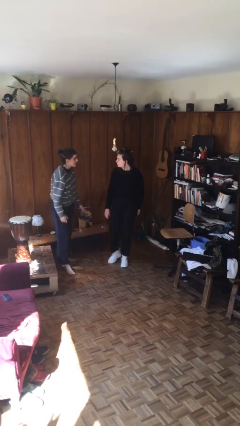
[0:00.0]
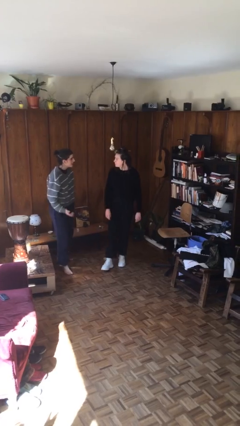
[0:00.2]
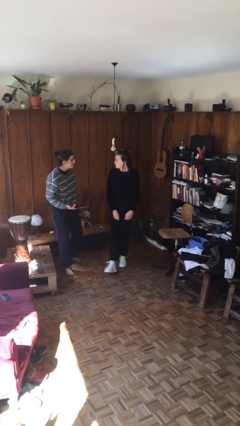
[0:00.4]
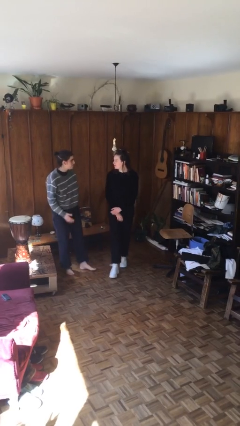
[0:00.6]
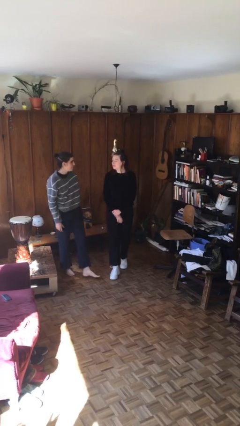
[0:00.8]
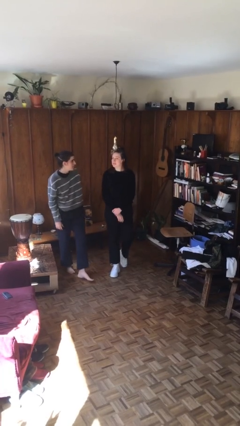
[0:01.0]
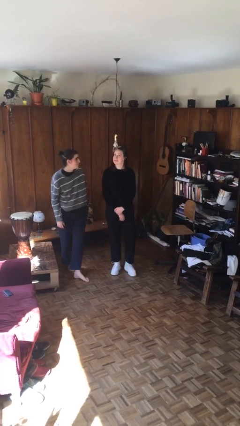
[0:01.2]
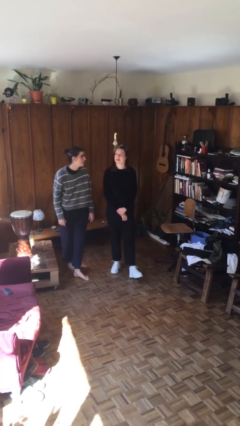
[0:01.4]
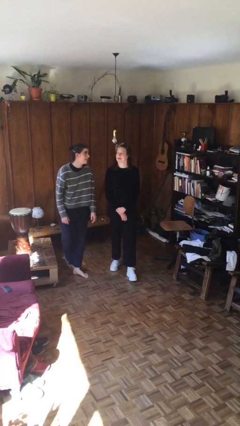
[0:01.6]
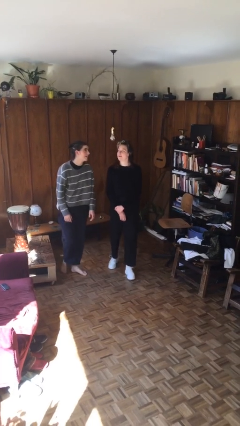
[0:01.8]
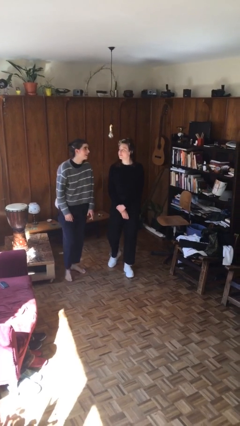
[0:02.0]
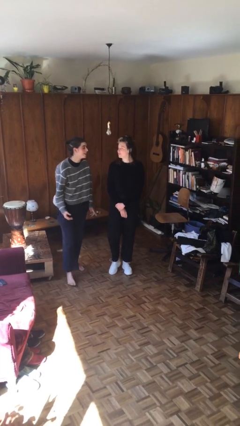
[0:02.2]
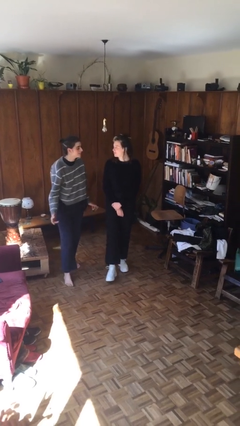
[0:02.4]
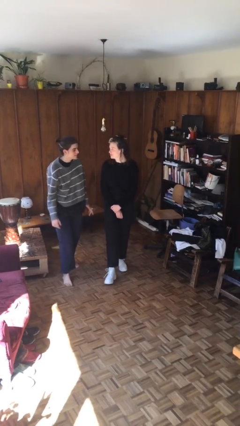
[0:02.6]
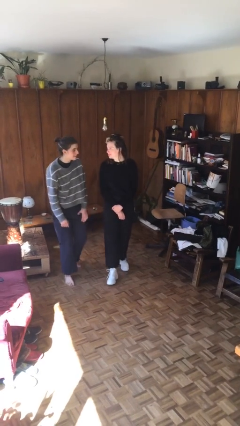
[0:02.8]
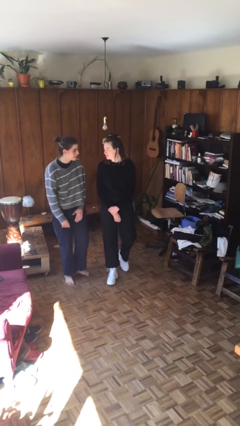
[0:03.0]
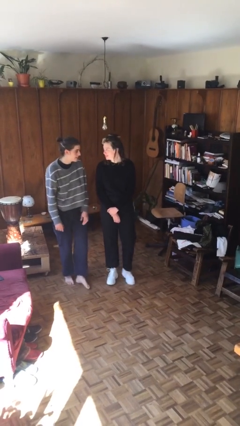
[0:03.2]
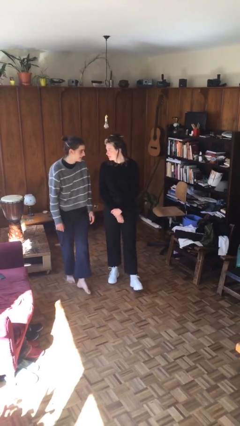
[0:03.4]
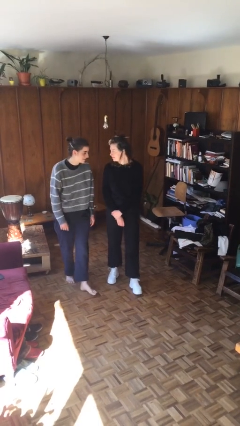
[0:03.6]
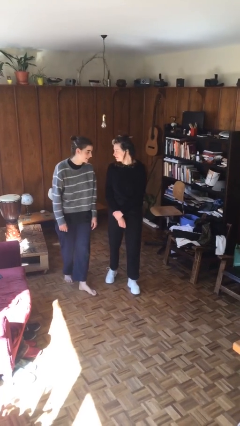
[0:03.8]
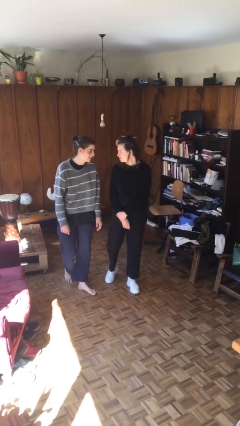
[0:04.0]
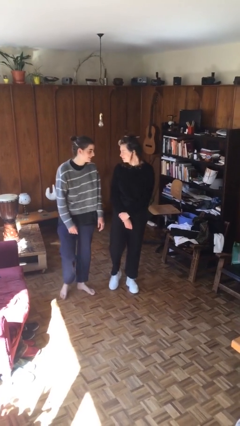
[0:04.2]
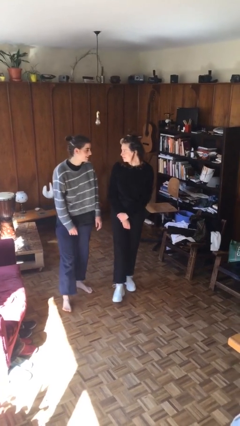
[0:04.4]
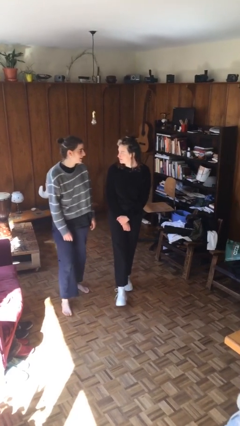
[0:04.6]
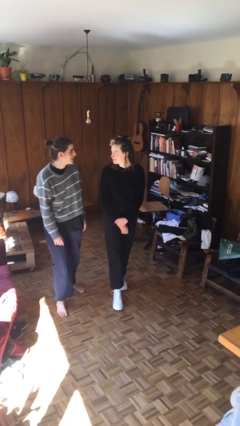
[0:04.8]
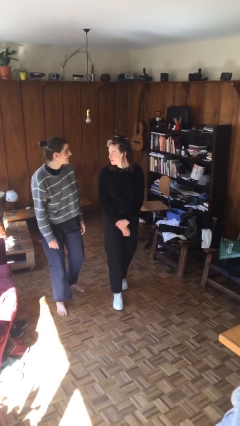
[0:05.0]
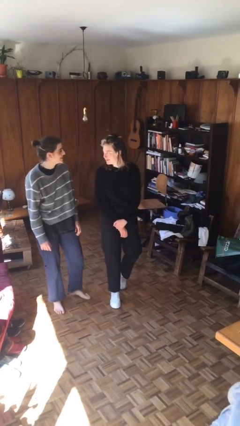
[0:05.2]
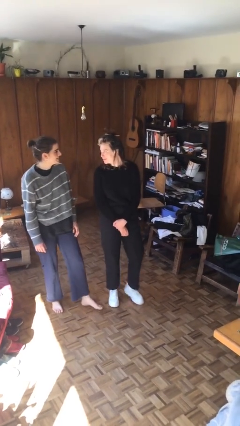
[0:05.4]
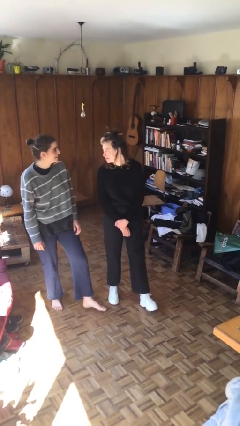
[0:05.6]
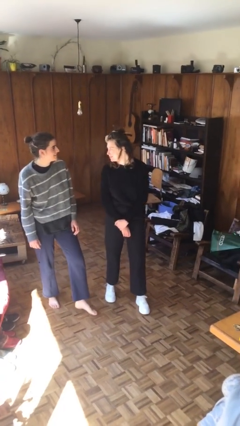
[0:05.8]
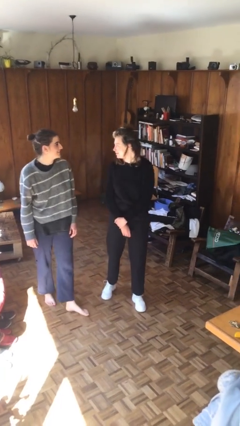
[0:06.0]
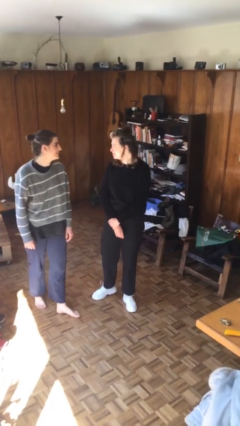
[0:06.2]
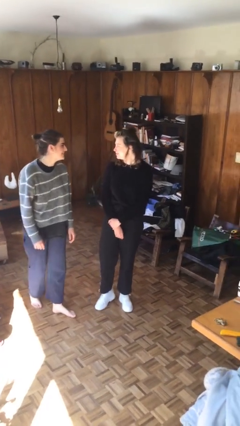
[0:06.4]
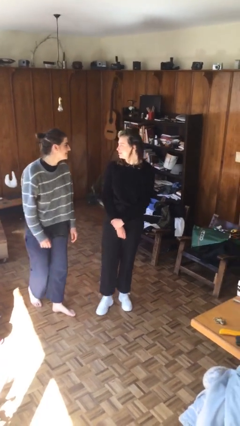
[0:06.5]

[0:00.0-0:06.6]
person talks to person

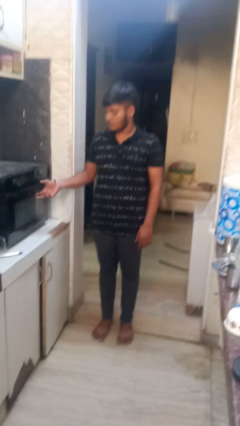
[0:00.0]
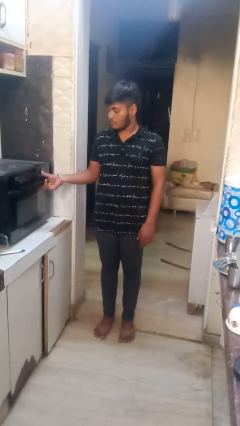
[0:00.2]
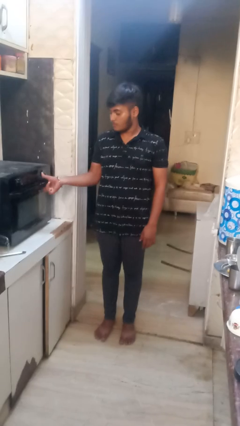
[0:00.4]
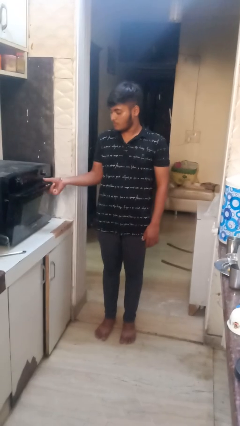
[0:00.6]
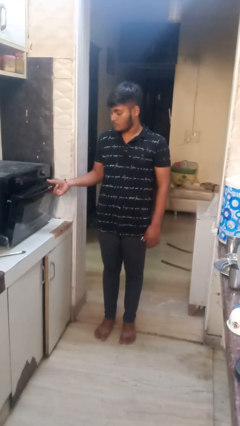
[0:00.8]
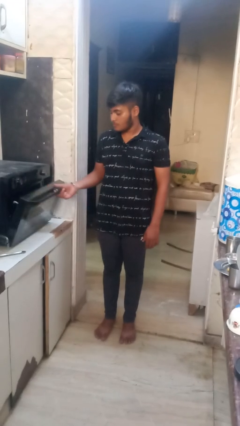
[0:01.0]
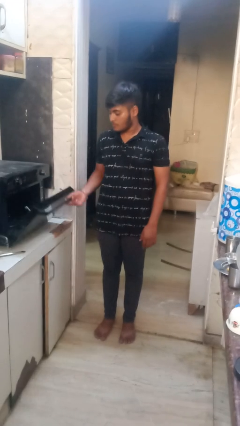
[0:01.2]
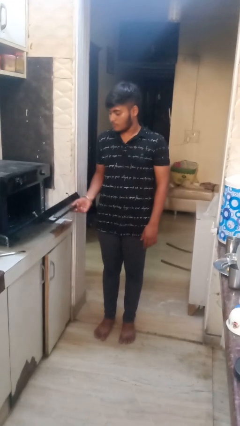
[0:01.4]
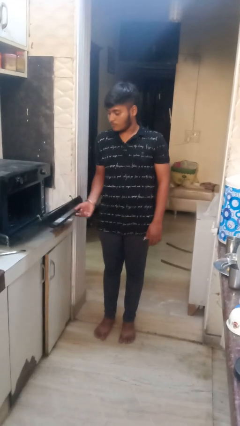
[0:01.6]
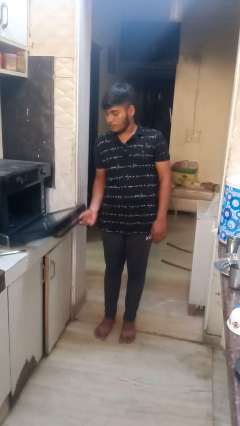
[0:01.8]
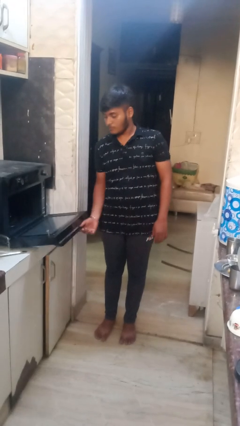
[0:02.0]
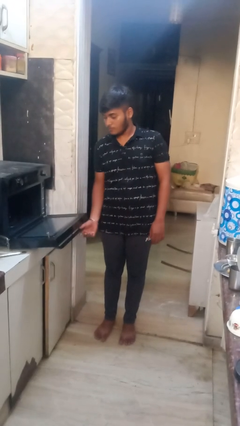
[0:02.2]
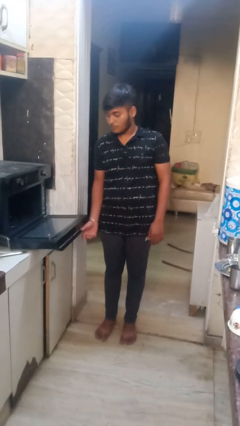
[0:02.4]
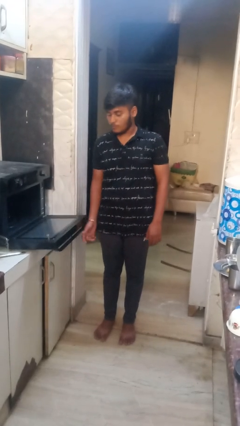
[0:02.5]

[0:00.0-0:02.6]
person opens oven door

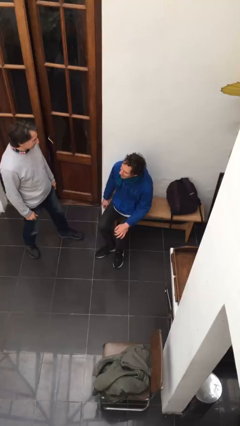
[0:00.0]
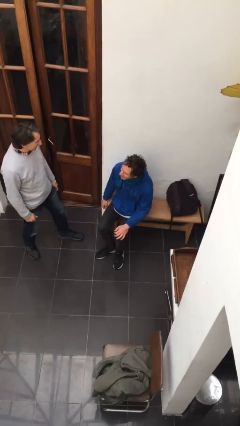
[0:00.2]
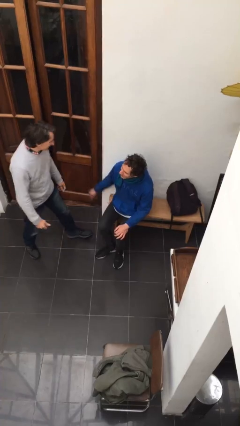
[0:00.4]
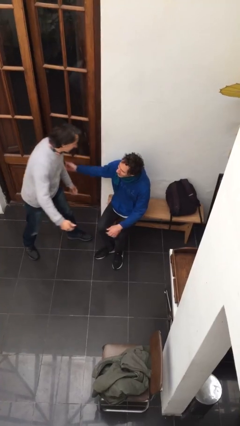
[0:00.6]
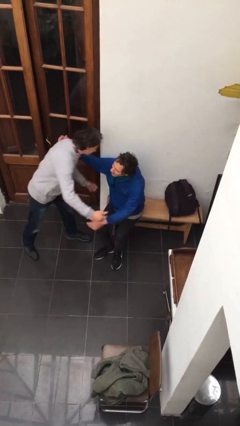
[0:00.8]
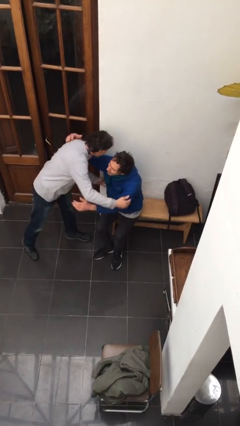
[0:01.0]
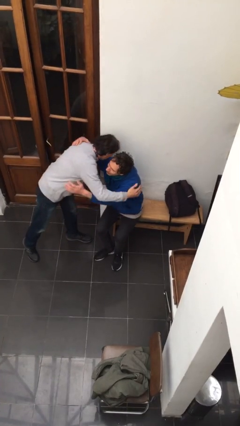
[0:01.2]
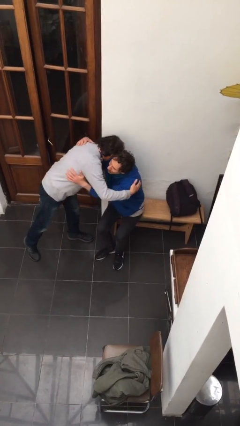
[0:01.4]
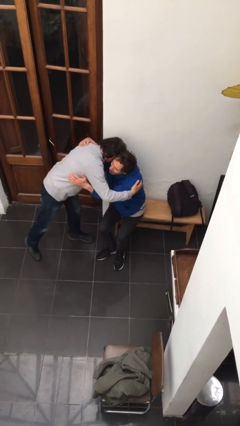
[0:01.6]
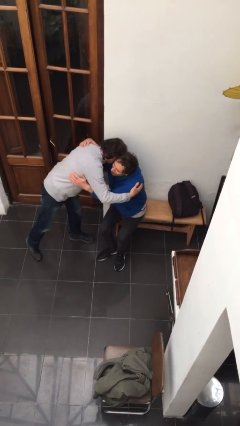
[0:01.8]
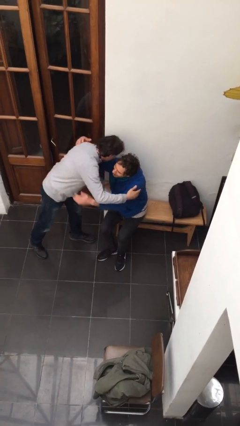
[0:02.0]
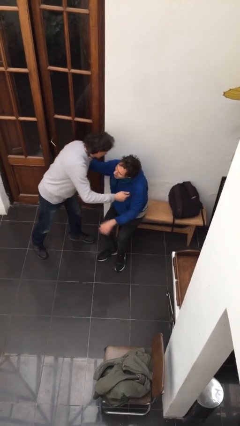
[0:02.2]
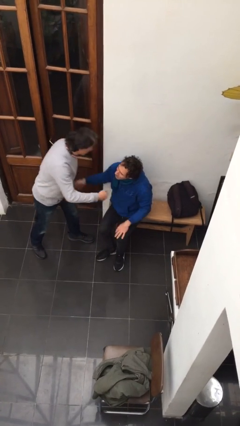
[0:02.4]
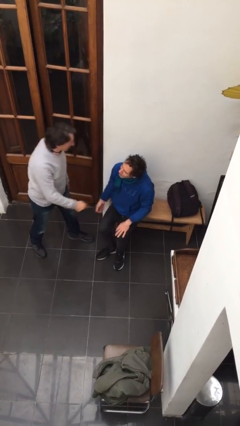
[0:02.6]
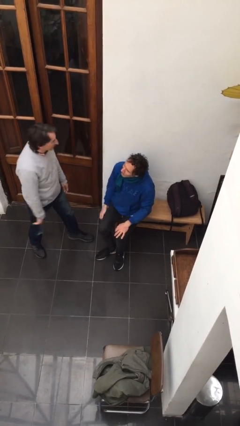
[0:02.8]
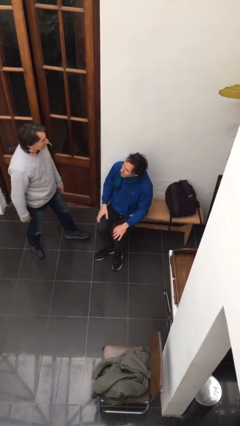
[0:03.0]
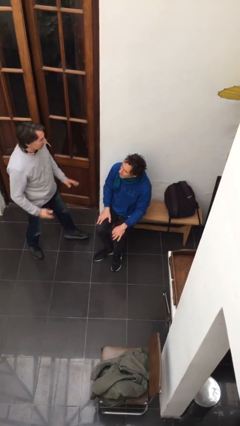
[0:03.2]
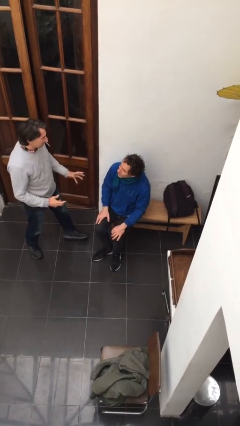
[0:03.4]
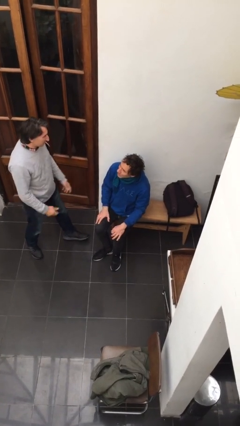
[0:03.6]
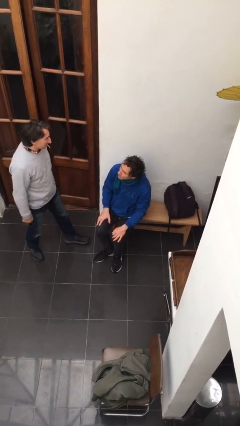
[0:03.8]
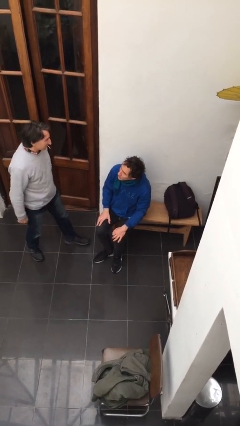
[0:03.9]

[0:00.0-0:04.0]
person embraces person

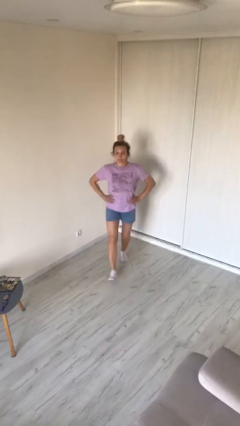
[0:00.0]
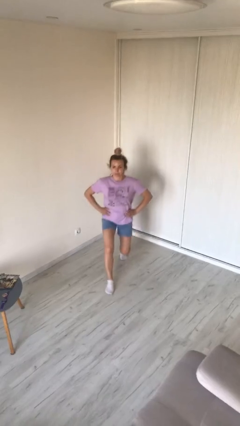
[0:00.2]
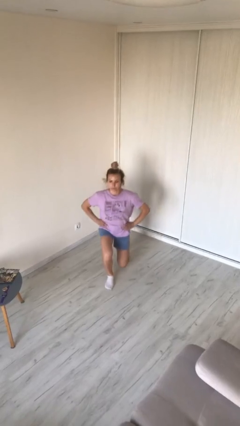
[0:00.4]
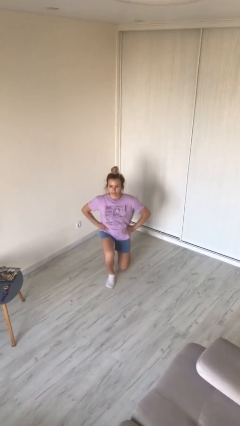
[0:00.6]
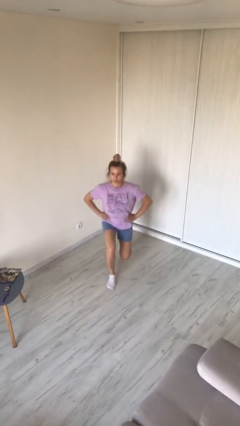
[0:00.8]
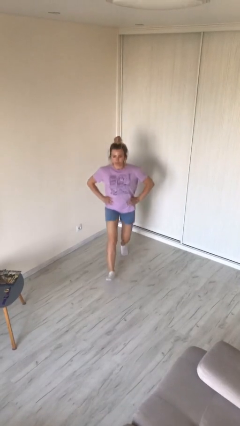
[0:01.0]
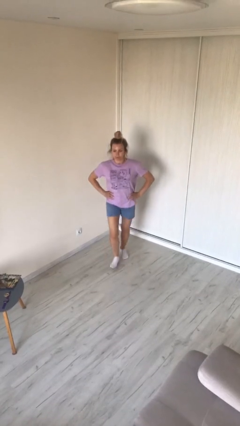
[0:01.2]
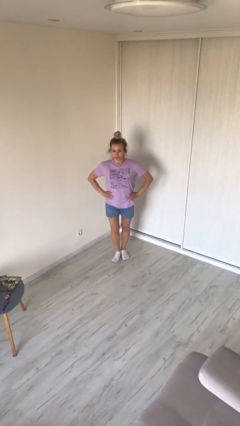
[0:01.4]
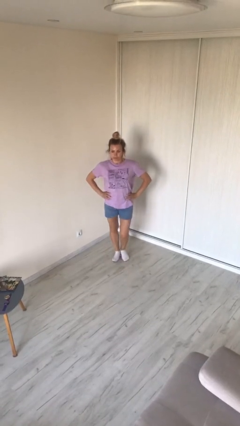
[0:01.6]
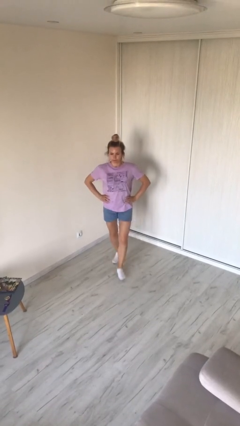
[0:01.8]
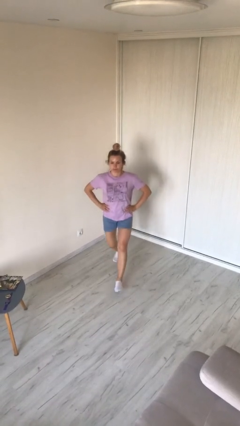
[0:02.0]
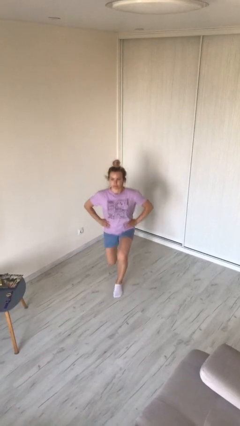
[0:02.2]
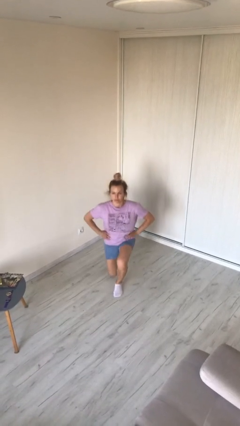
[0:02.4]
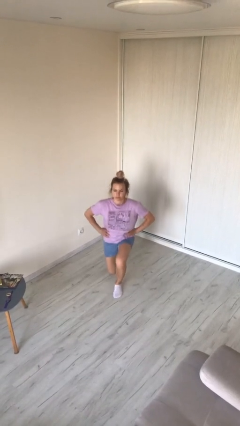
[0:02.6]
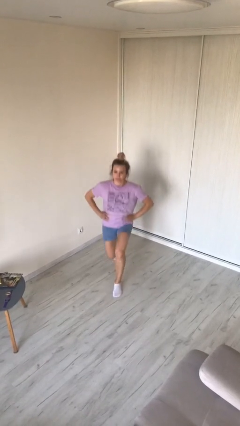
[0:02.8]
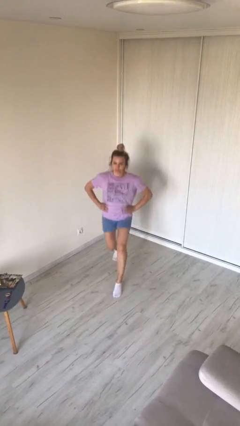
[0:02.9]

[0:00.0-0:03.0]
person exercises with lunges

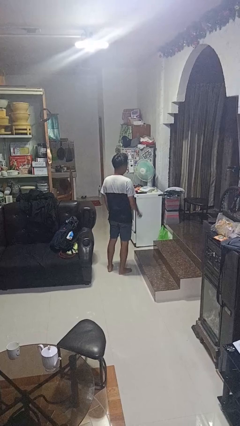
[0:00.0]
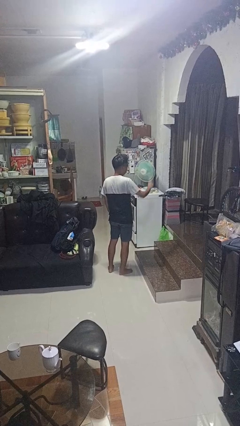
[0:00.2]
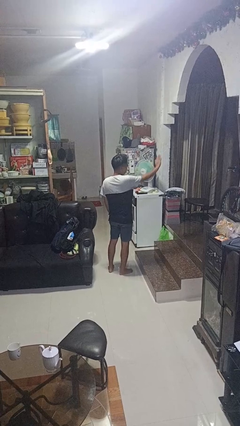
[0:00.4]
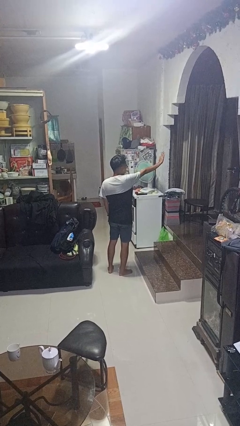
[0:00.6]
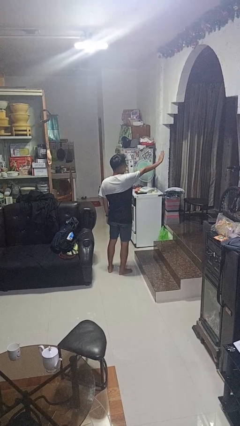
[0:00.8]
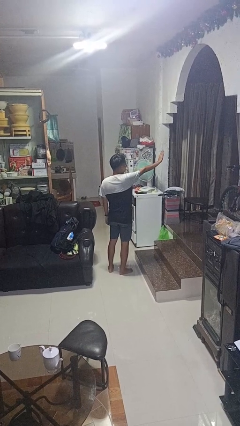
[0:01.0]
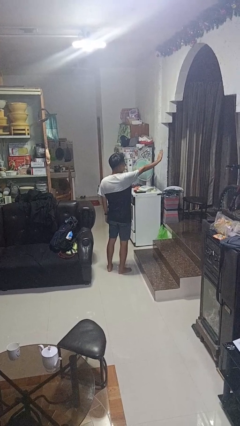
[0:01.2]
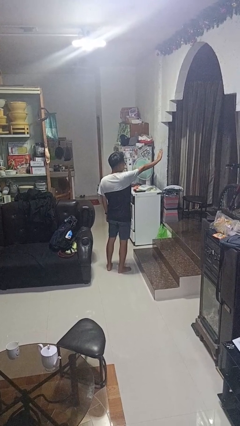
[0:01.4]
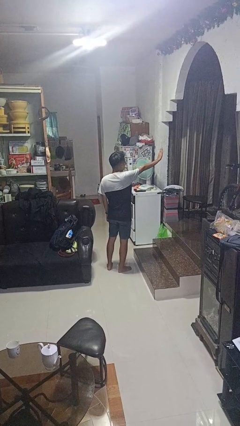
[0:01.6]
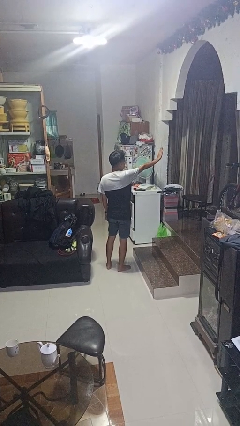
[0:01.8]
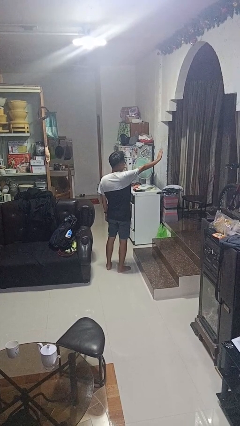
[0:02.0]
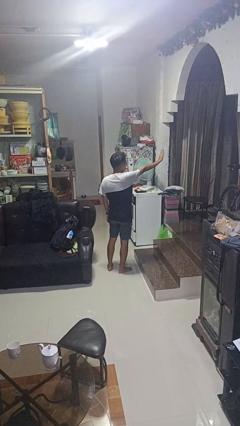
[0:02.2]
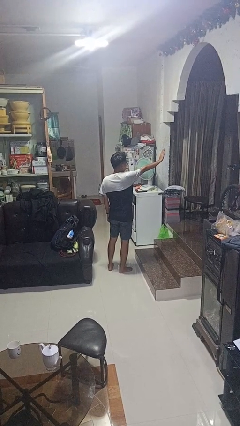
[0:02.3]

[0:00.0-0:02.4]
person gestures stop
